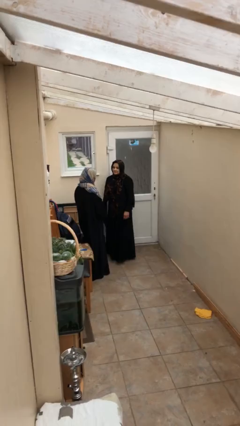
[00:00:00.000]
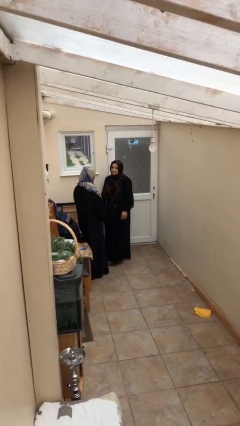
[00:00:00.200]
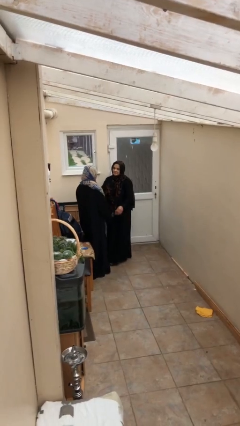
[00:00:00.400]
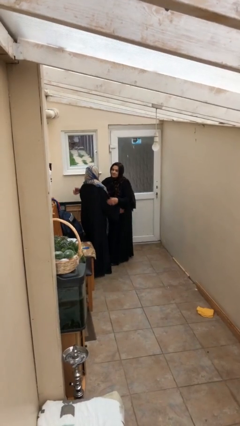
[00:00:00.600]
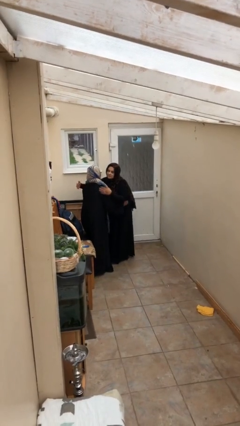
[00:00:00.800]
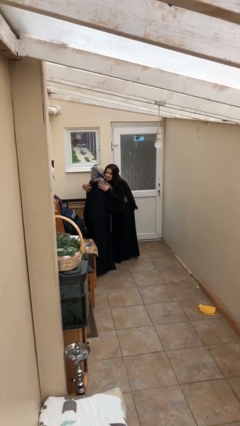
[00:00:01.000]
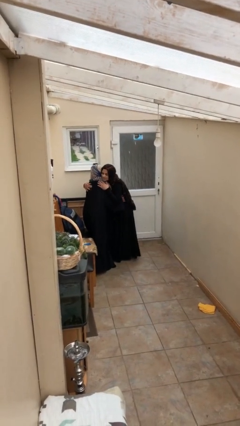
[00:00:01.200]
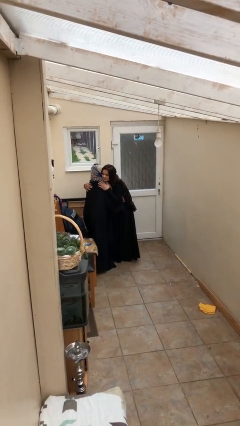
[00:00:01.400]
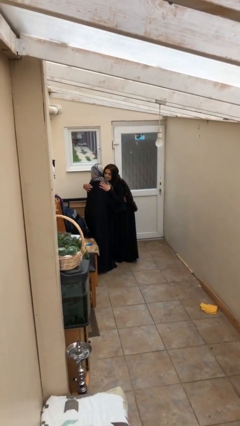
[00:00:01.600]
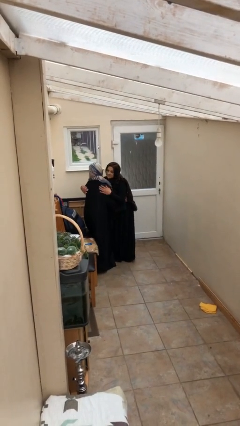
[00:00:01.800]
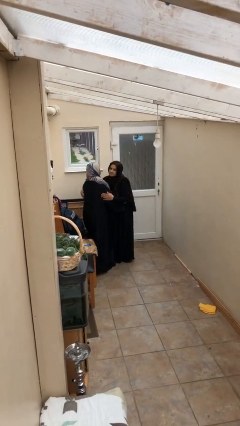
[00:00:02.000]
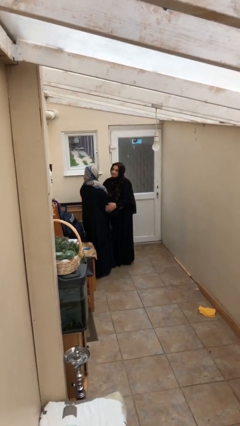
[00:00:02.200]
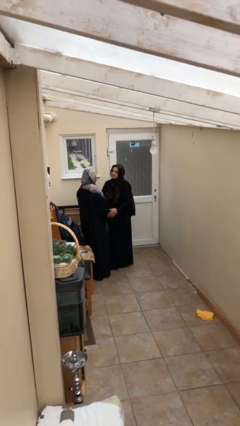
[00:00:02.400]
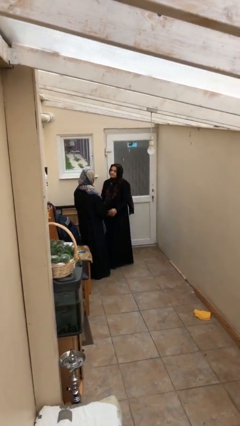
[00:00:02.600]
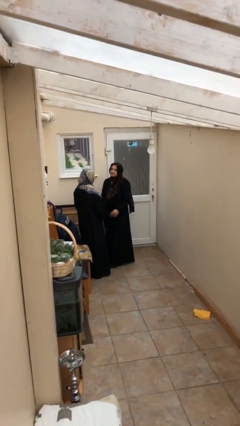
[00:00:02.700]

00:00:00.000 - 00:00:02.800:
person embraces person

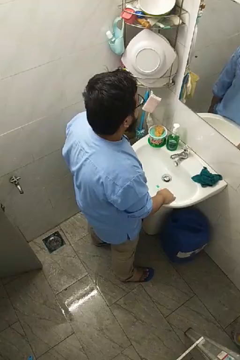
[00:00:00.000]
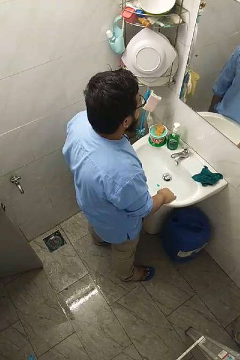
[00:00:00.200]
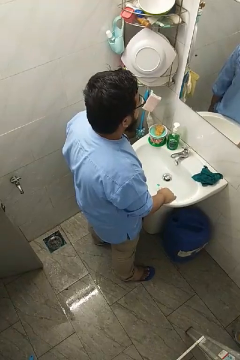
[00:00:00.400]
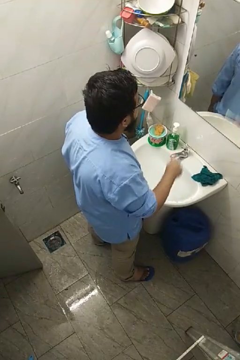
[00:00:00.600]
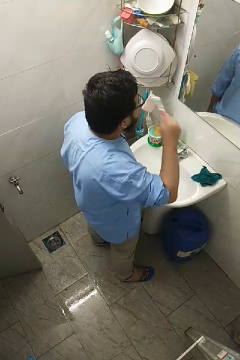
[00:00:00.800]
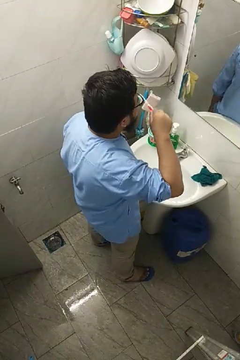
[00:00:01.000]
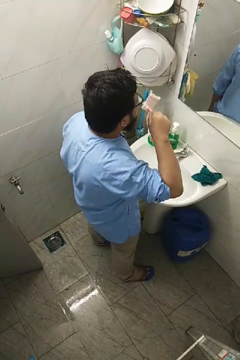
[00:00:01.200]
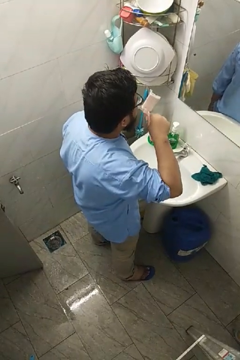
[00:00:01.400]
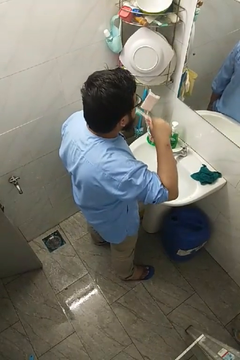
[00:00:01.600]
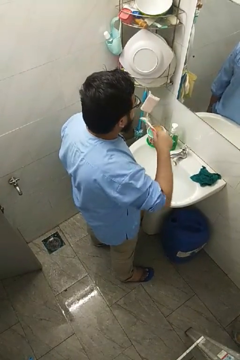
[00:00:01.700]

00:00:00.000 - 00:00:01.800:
person brushes teeth

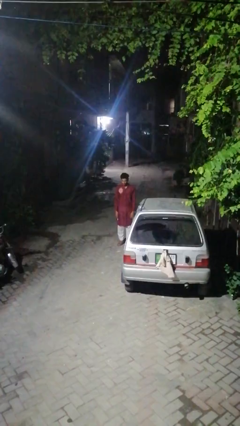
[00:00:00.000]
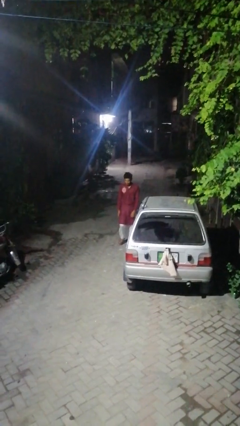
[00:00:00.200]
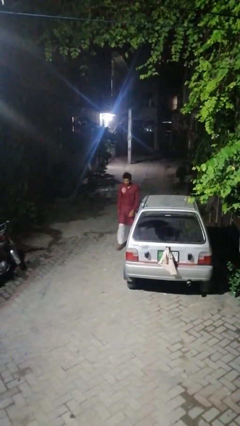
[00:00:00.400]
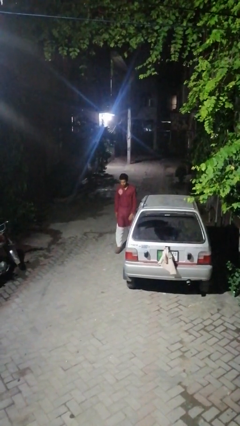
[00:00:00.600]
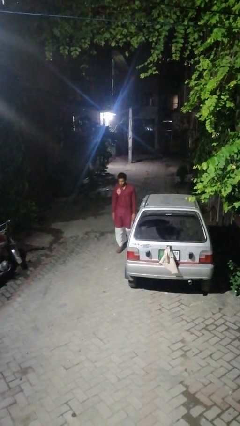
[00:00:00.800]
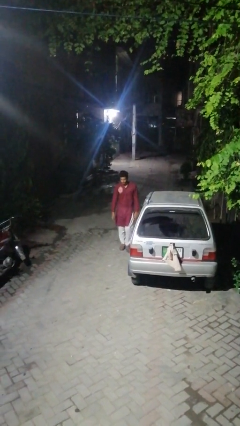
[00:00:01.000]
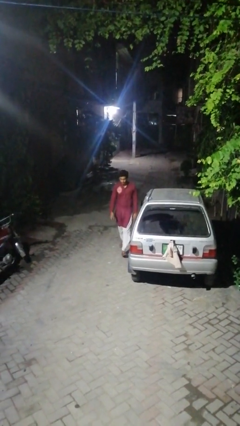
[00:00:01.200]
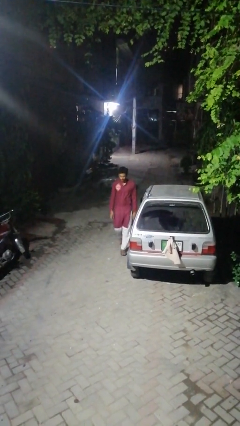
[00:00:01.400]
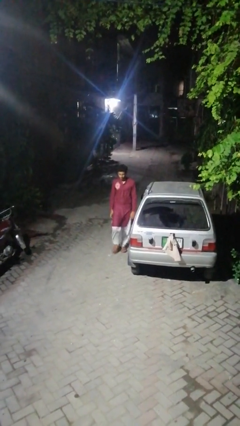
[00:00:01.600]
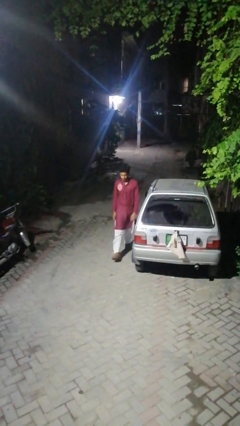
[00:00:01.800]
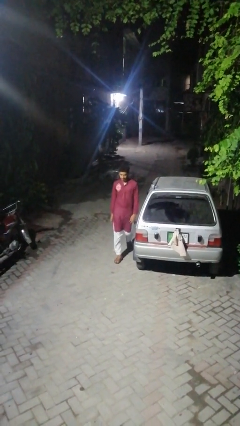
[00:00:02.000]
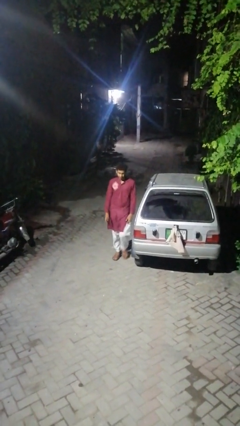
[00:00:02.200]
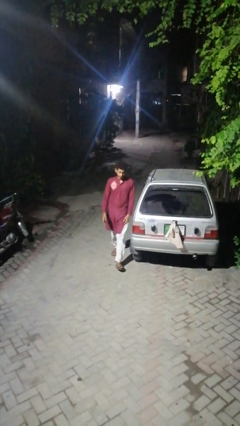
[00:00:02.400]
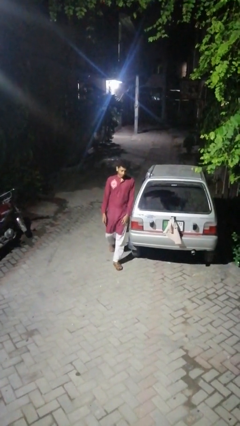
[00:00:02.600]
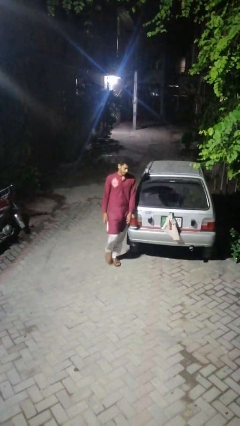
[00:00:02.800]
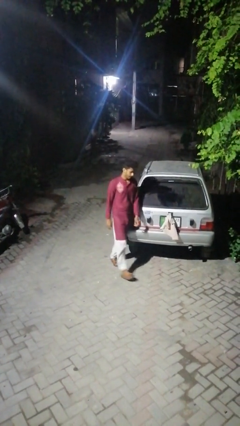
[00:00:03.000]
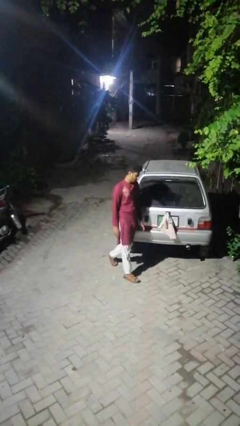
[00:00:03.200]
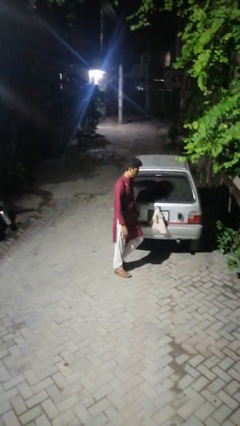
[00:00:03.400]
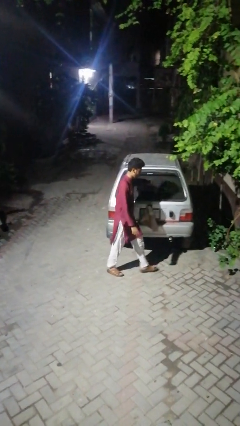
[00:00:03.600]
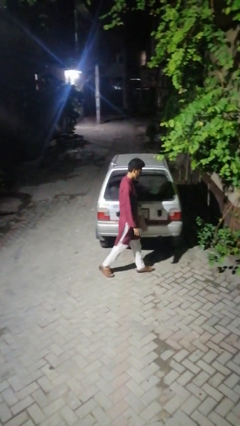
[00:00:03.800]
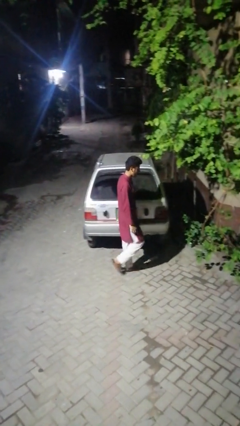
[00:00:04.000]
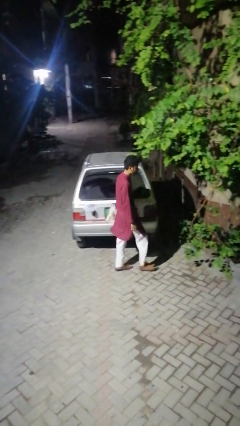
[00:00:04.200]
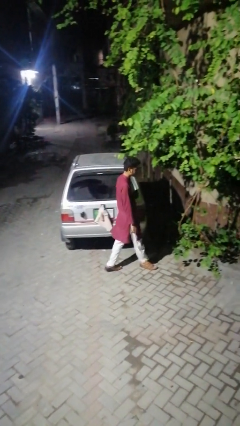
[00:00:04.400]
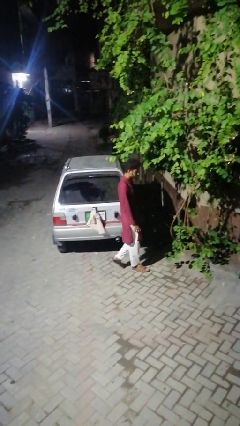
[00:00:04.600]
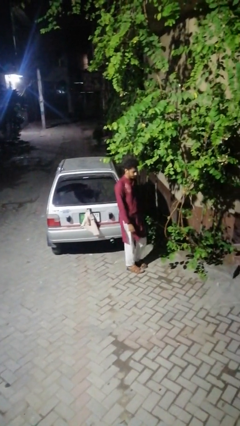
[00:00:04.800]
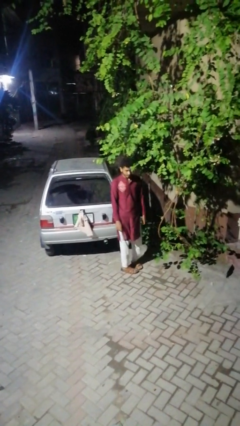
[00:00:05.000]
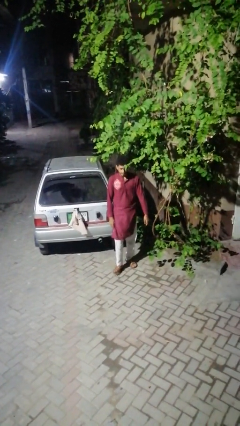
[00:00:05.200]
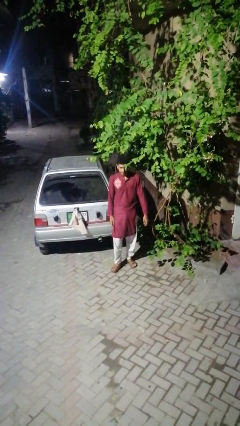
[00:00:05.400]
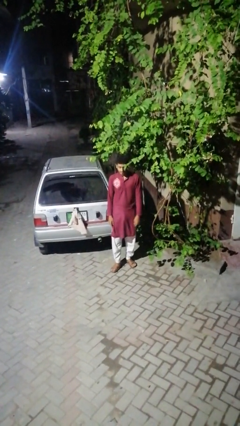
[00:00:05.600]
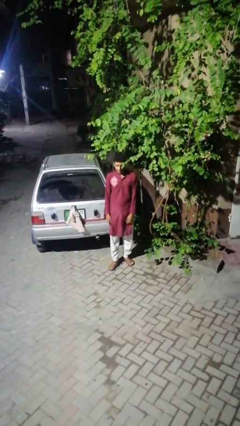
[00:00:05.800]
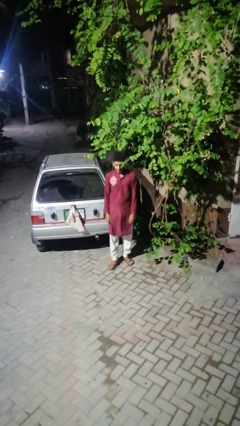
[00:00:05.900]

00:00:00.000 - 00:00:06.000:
person walks around car

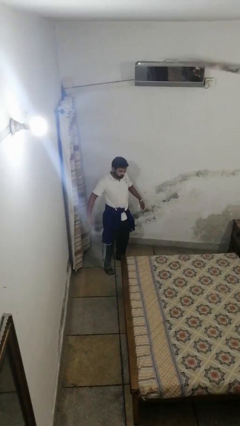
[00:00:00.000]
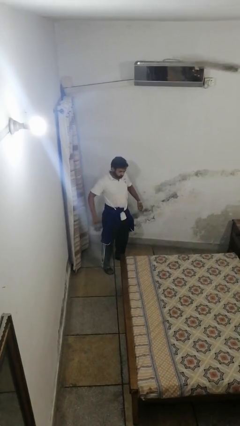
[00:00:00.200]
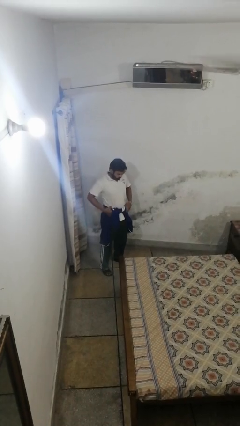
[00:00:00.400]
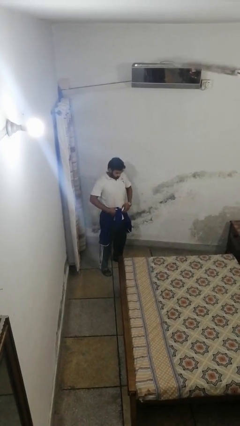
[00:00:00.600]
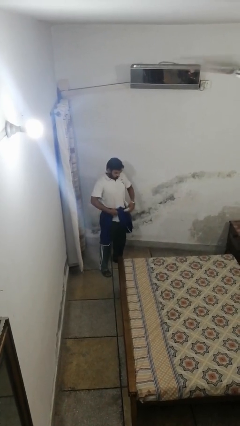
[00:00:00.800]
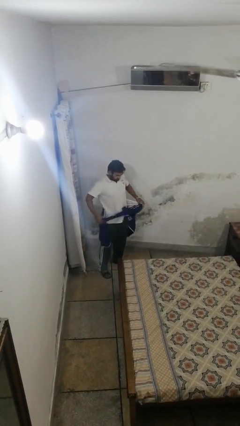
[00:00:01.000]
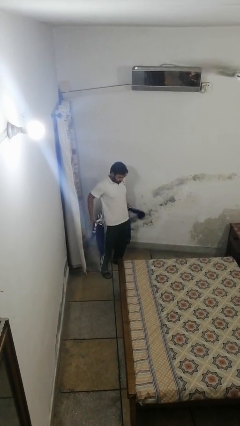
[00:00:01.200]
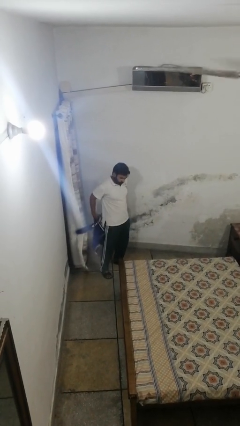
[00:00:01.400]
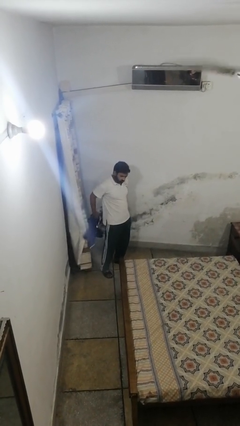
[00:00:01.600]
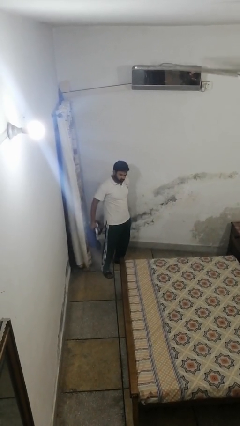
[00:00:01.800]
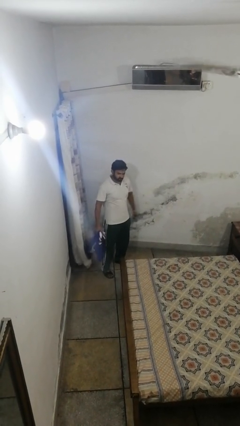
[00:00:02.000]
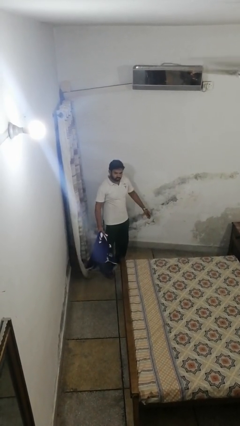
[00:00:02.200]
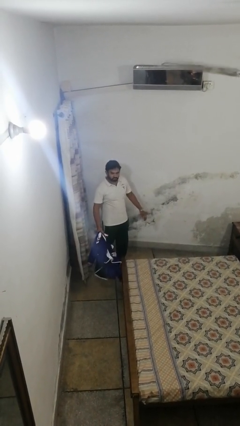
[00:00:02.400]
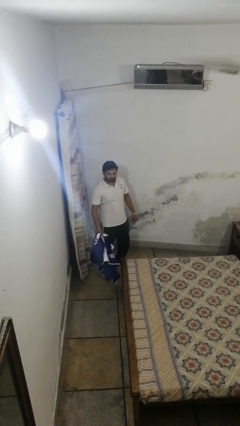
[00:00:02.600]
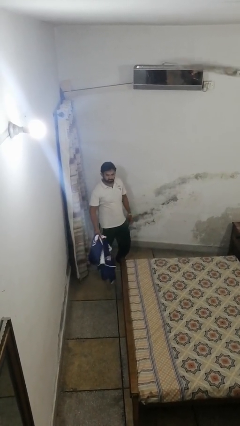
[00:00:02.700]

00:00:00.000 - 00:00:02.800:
person unties jacket around waist

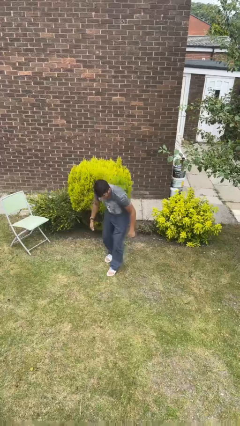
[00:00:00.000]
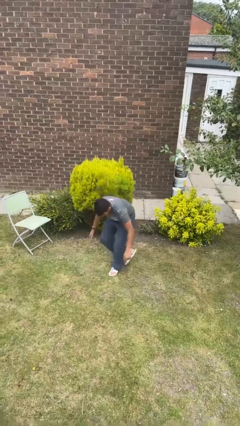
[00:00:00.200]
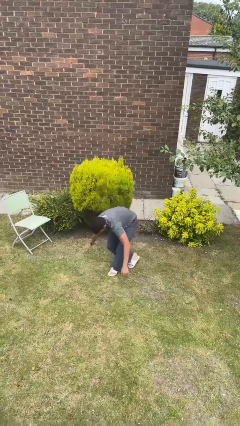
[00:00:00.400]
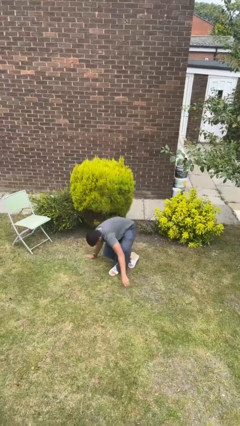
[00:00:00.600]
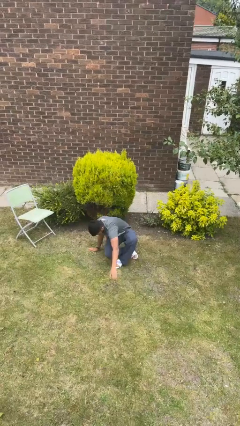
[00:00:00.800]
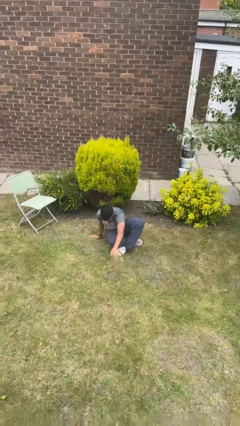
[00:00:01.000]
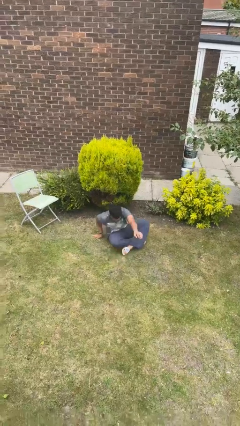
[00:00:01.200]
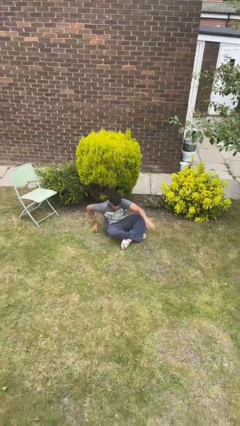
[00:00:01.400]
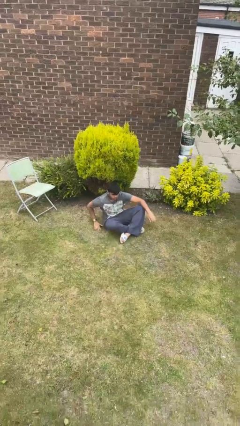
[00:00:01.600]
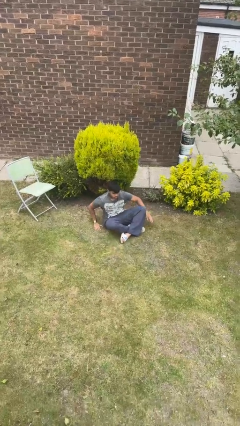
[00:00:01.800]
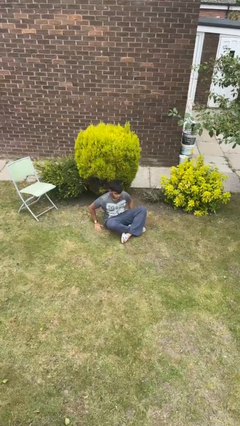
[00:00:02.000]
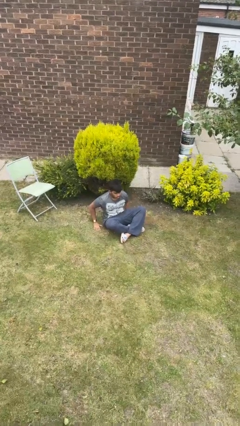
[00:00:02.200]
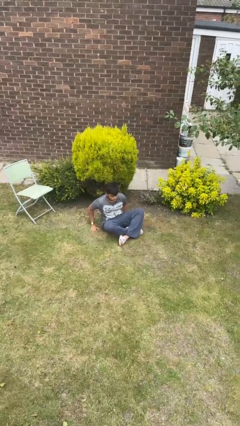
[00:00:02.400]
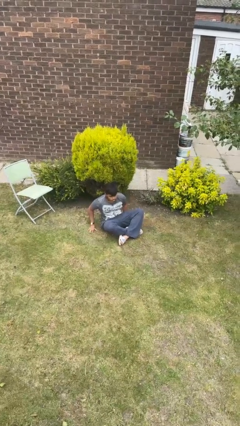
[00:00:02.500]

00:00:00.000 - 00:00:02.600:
person sits crisscross

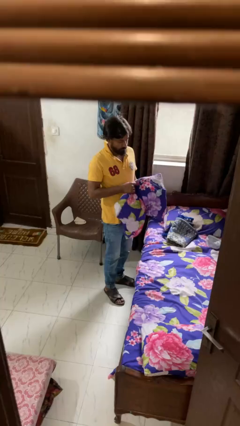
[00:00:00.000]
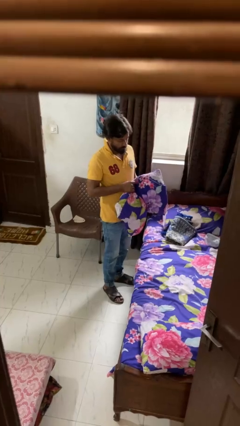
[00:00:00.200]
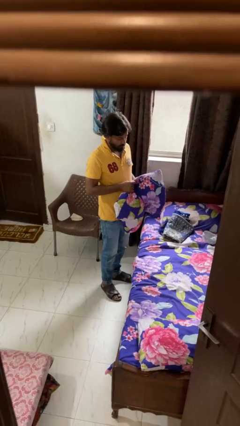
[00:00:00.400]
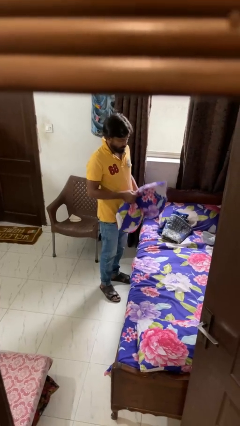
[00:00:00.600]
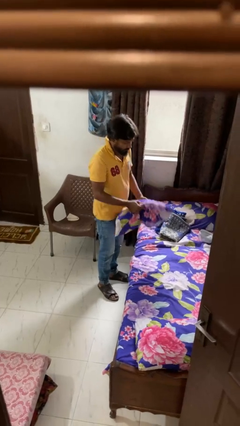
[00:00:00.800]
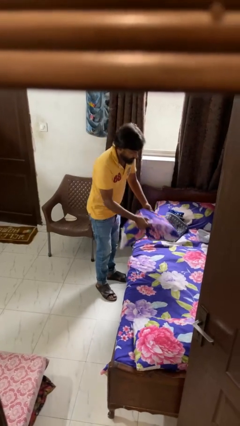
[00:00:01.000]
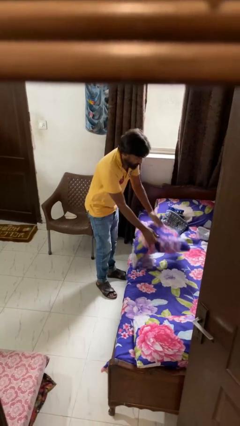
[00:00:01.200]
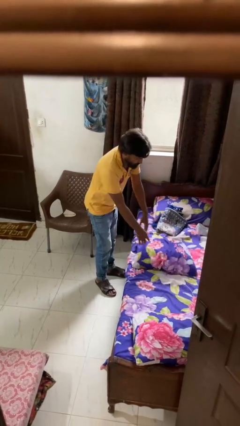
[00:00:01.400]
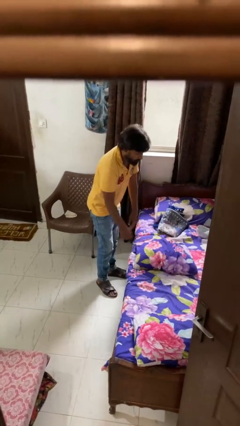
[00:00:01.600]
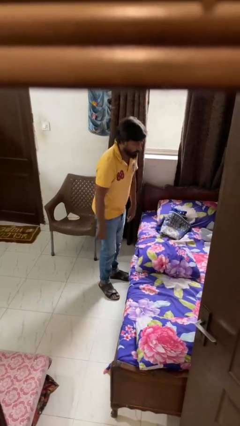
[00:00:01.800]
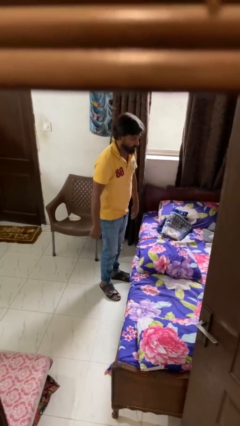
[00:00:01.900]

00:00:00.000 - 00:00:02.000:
person puts down object on bed
